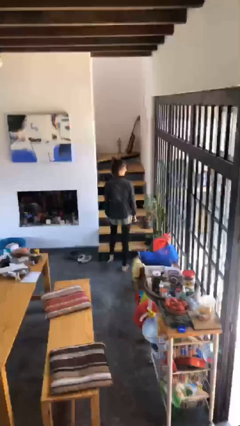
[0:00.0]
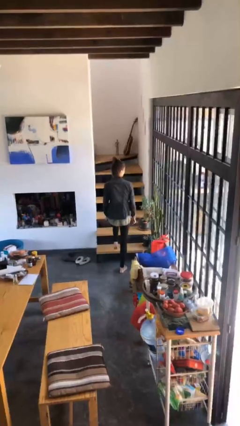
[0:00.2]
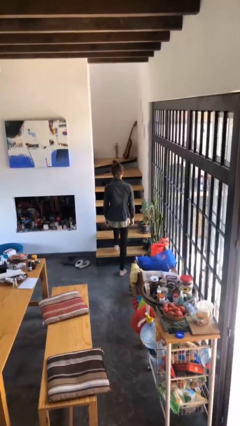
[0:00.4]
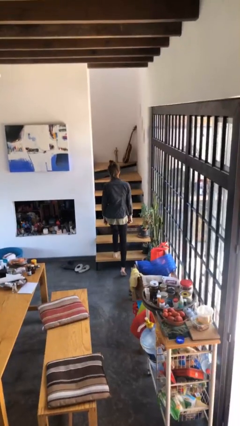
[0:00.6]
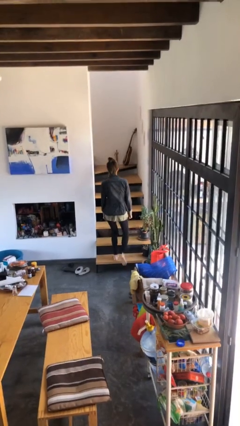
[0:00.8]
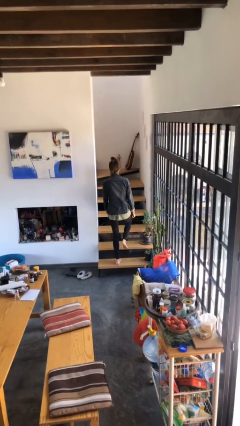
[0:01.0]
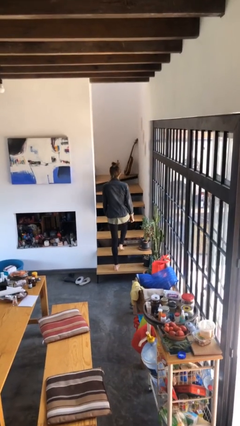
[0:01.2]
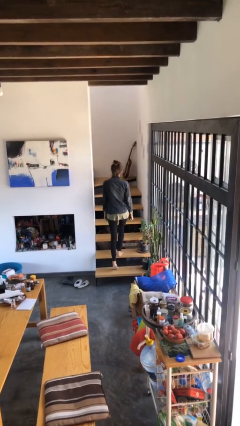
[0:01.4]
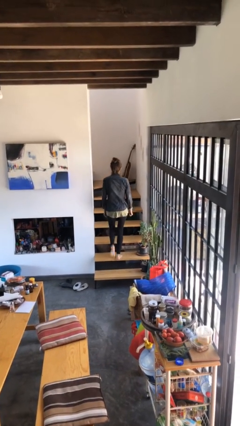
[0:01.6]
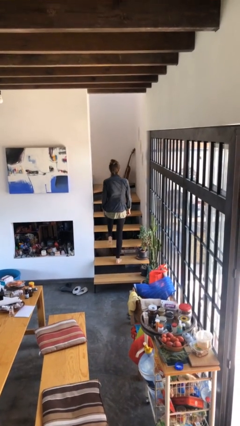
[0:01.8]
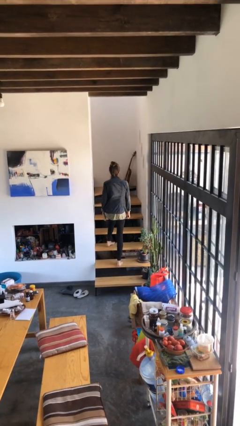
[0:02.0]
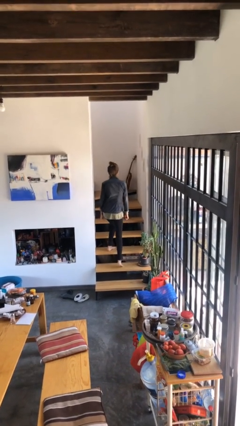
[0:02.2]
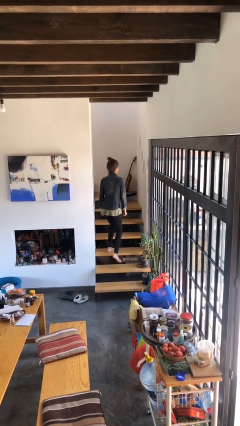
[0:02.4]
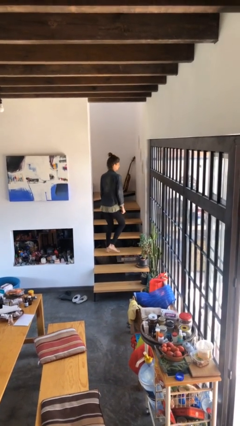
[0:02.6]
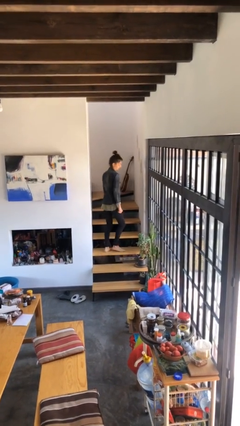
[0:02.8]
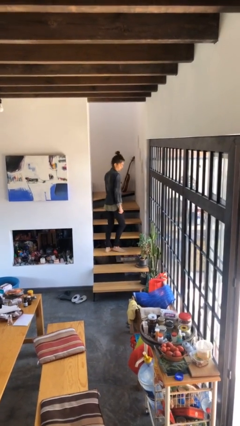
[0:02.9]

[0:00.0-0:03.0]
person climbs up stairs

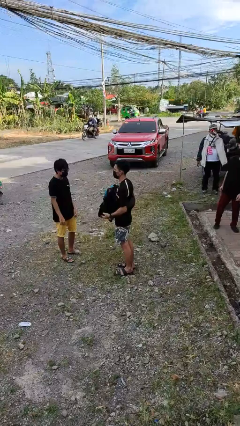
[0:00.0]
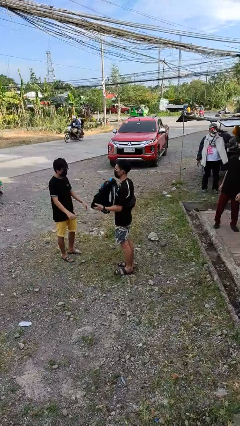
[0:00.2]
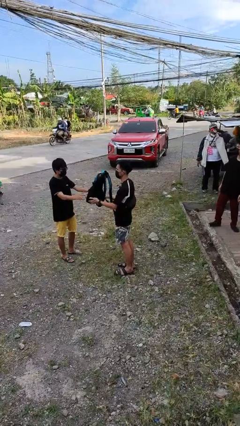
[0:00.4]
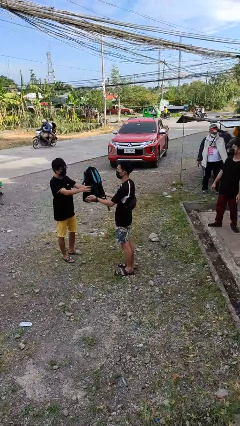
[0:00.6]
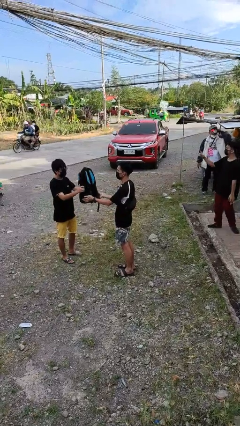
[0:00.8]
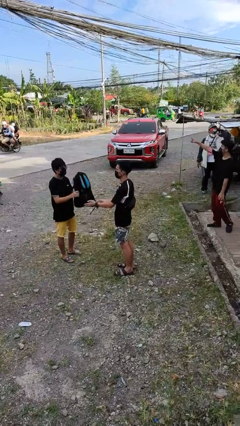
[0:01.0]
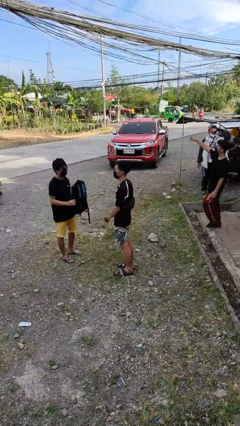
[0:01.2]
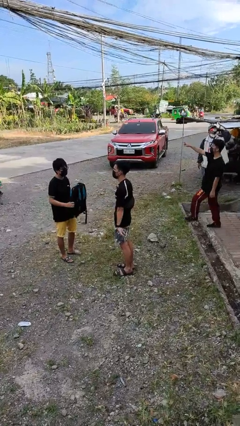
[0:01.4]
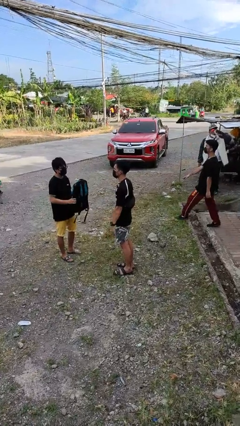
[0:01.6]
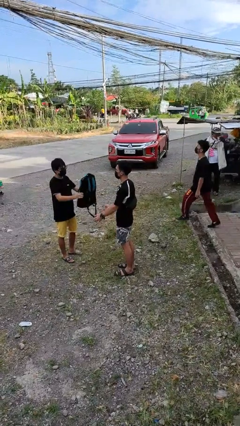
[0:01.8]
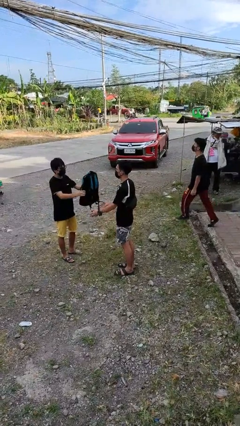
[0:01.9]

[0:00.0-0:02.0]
person transfers object to person

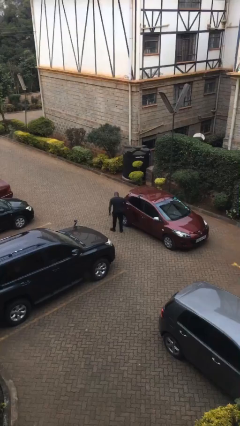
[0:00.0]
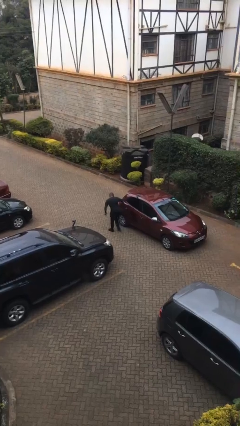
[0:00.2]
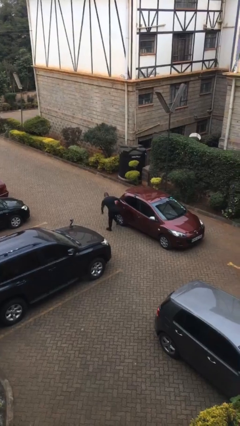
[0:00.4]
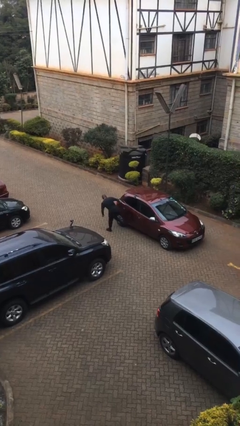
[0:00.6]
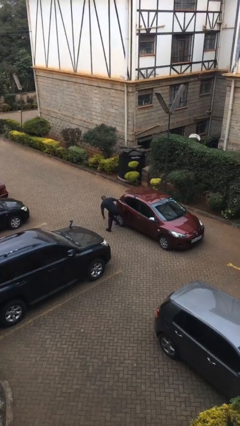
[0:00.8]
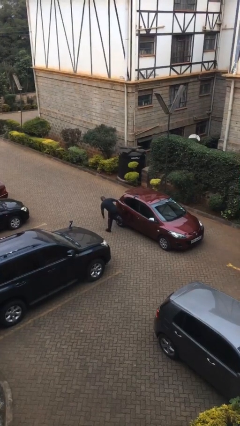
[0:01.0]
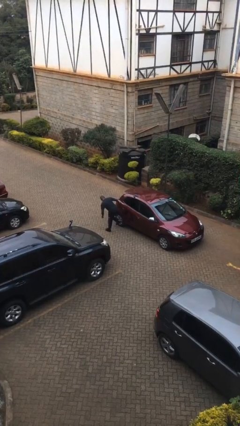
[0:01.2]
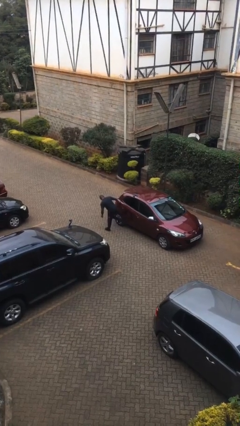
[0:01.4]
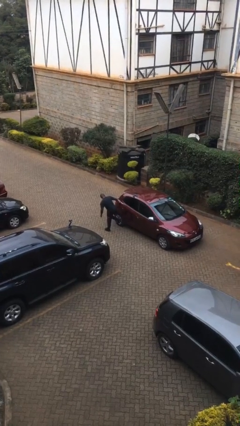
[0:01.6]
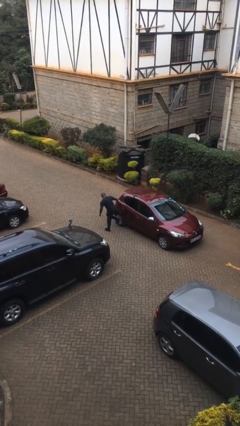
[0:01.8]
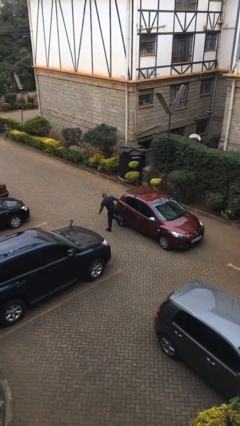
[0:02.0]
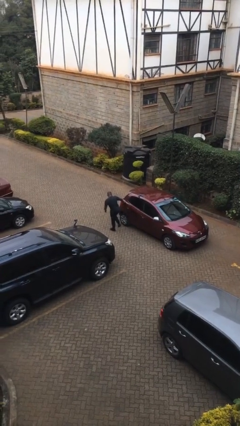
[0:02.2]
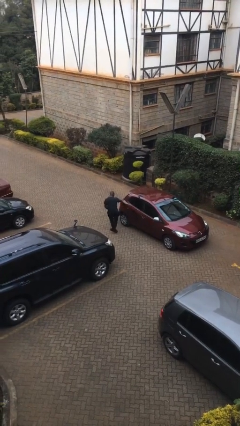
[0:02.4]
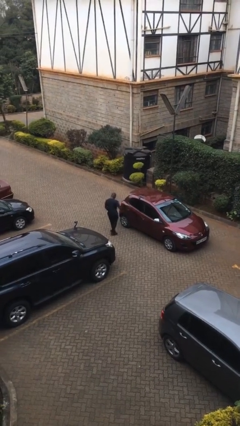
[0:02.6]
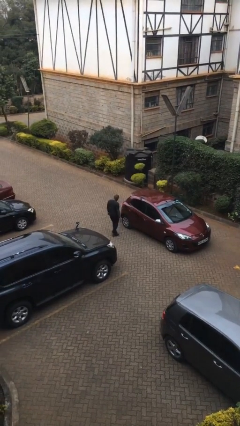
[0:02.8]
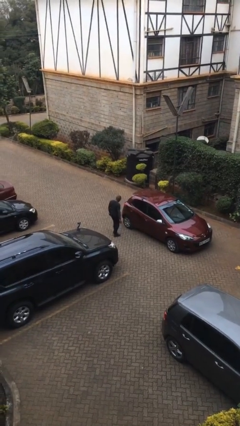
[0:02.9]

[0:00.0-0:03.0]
person kicks car tires

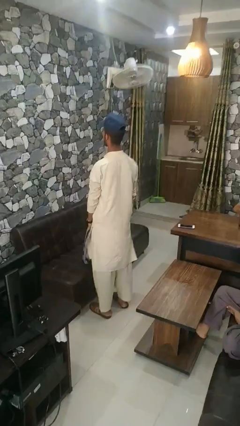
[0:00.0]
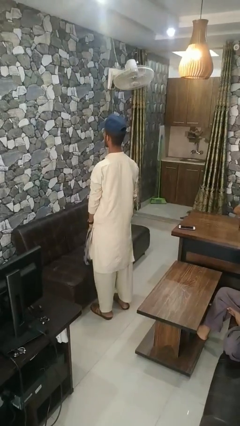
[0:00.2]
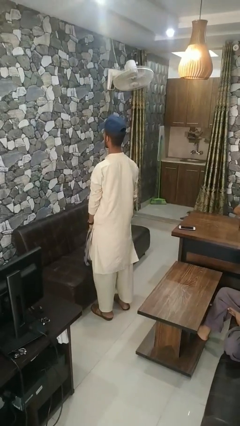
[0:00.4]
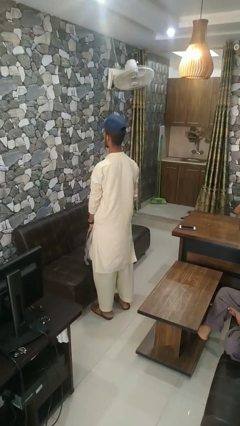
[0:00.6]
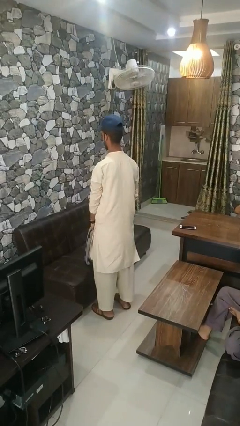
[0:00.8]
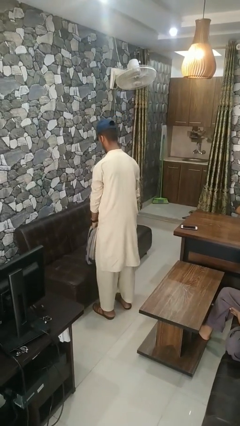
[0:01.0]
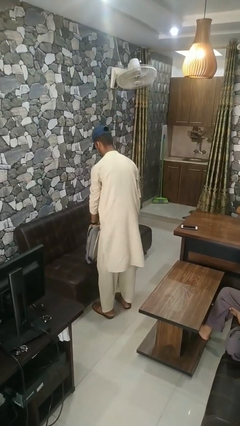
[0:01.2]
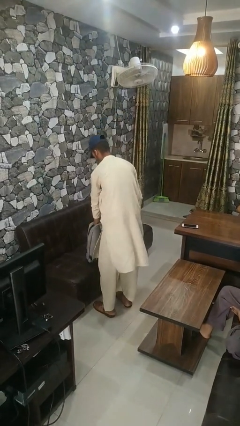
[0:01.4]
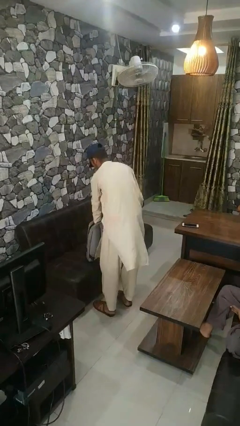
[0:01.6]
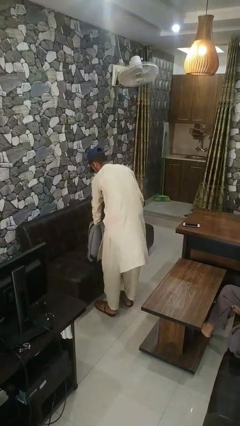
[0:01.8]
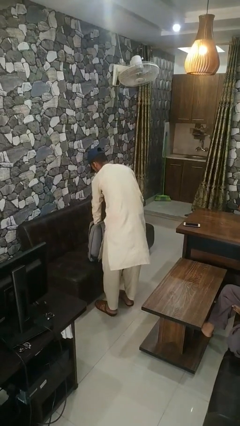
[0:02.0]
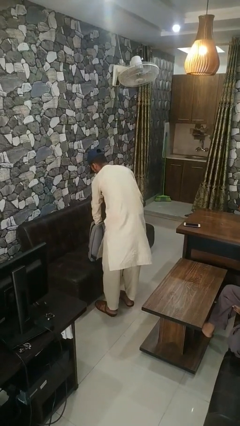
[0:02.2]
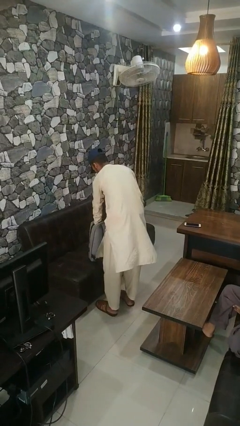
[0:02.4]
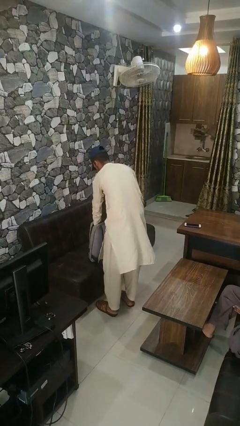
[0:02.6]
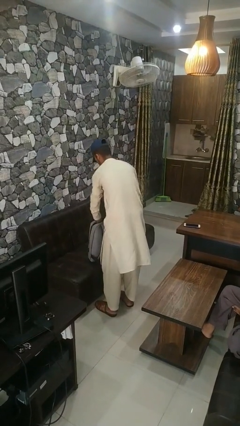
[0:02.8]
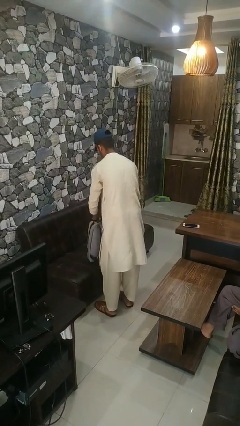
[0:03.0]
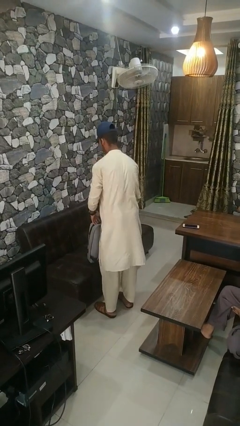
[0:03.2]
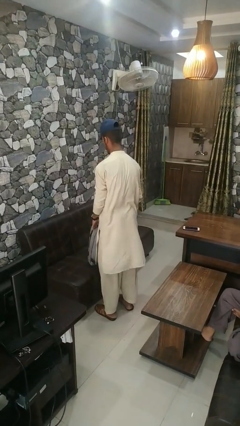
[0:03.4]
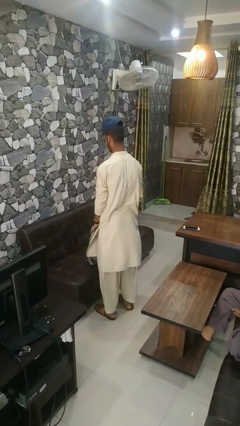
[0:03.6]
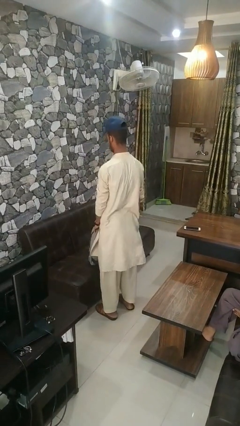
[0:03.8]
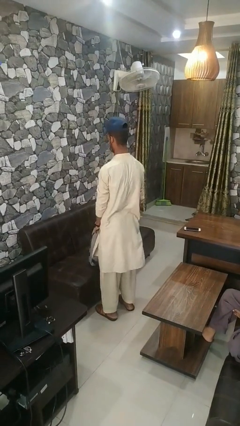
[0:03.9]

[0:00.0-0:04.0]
person searches in bag

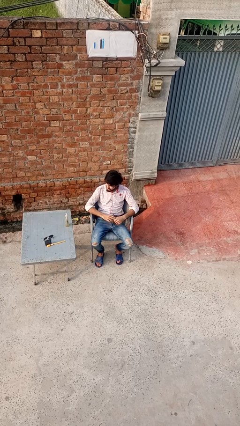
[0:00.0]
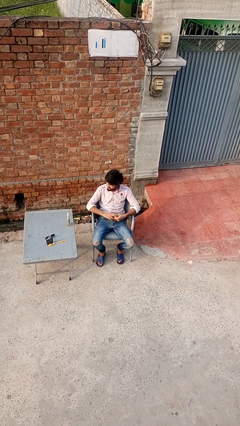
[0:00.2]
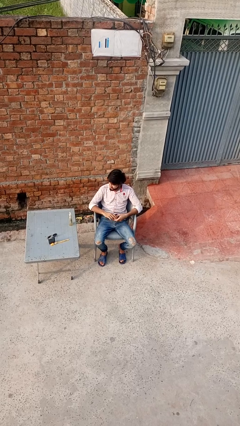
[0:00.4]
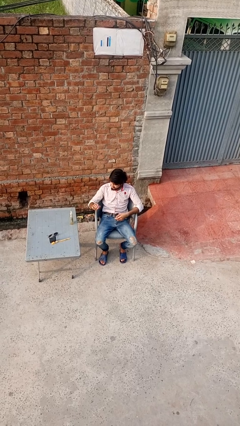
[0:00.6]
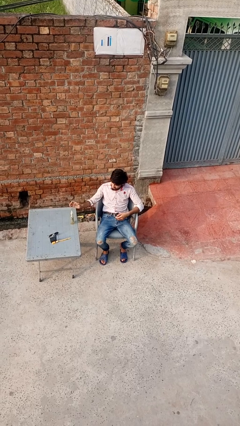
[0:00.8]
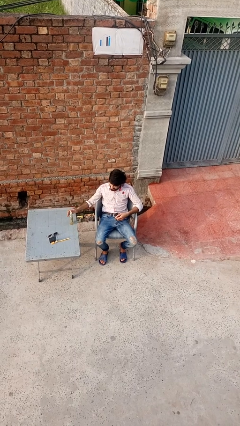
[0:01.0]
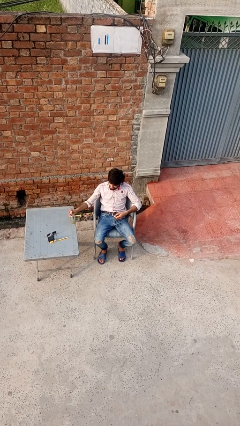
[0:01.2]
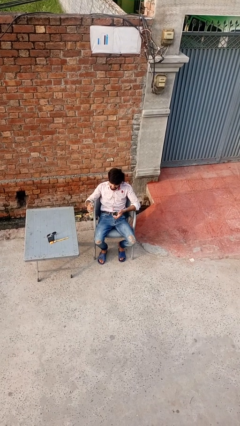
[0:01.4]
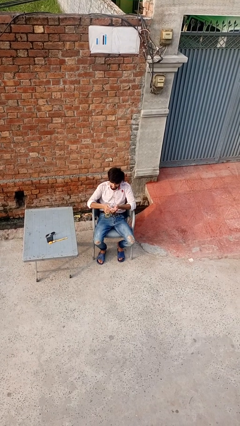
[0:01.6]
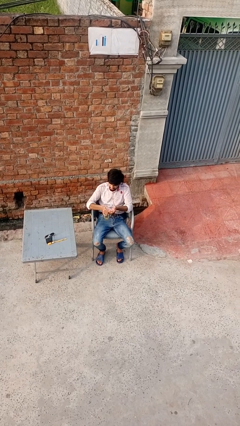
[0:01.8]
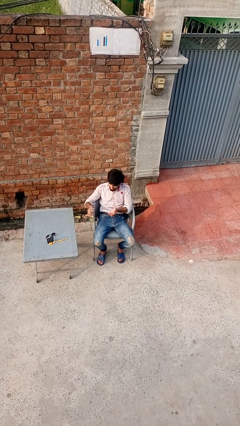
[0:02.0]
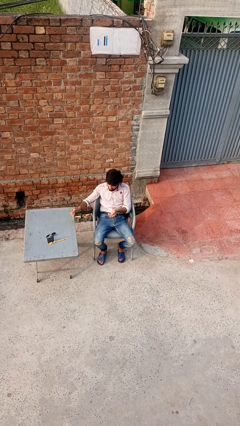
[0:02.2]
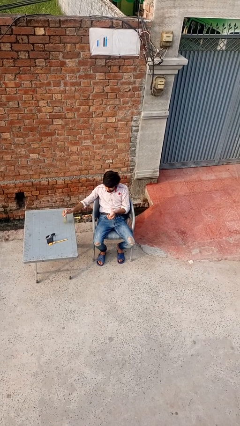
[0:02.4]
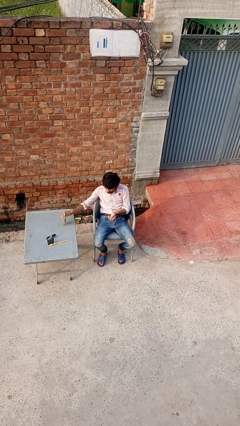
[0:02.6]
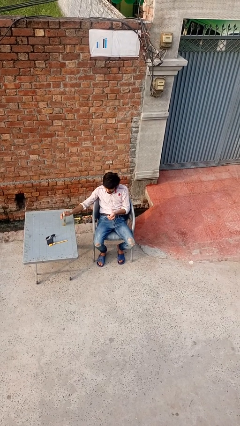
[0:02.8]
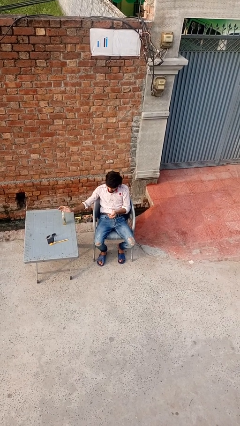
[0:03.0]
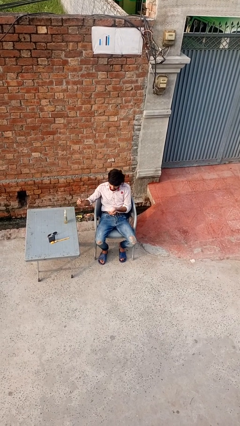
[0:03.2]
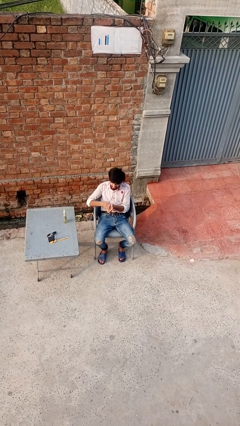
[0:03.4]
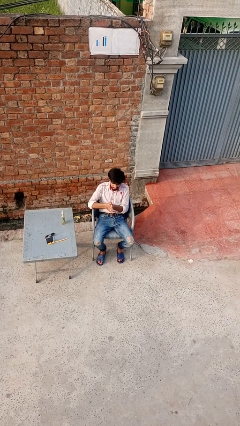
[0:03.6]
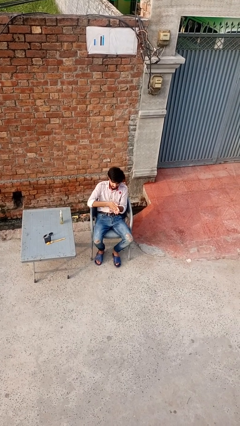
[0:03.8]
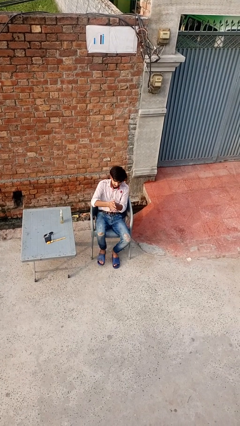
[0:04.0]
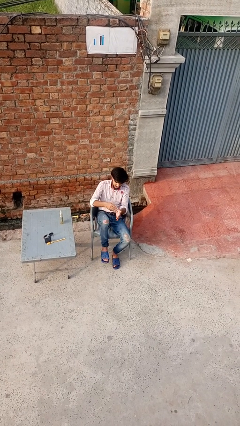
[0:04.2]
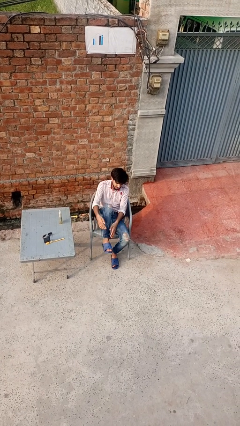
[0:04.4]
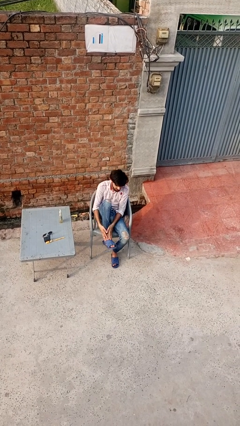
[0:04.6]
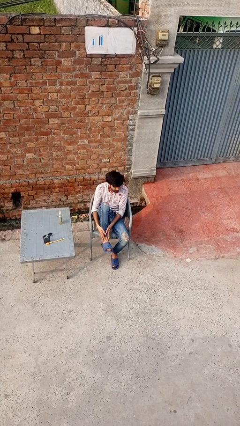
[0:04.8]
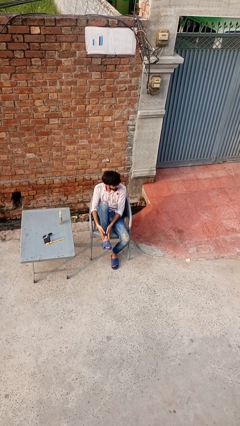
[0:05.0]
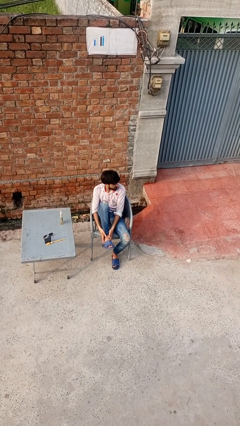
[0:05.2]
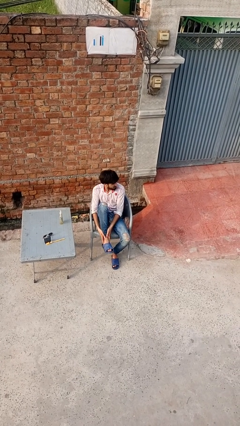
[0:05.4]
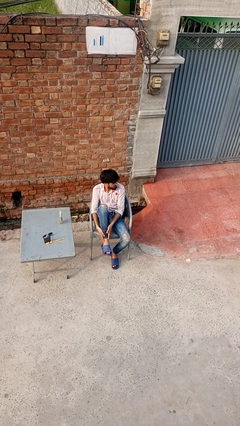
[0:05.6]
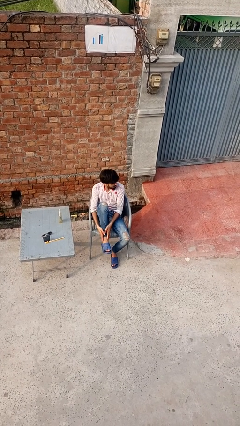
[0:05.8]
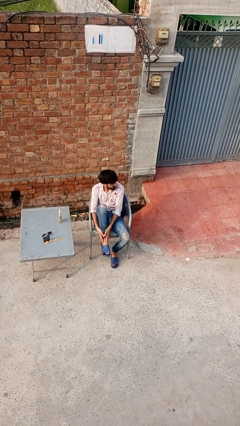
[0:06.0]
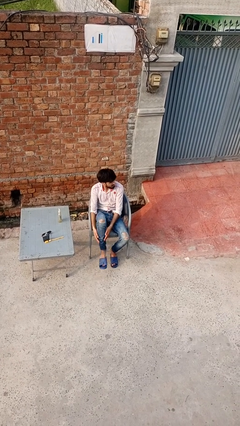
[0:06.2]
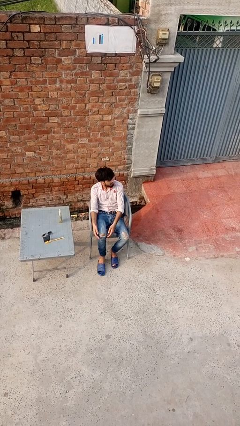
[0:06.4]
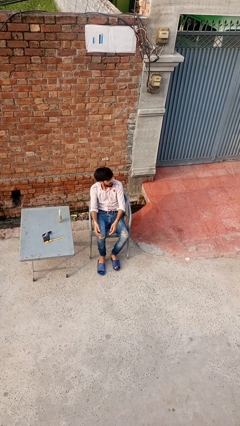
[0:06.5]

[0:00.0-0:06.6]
person applies sunscreen
